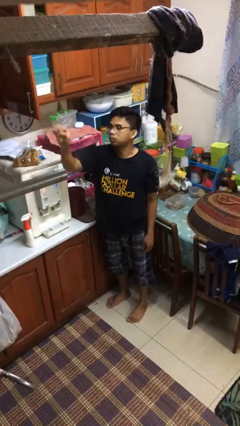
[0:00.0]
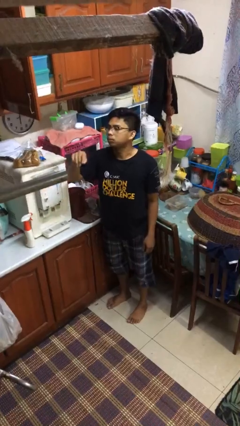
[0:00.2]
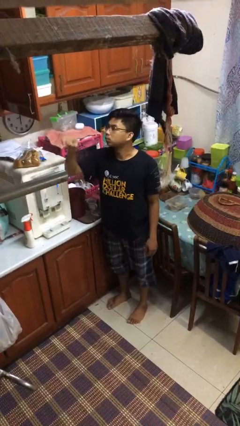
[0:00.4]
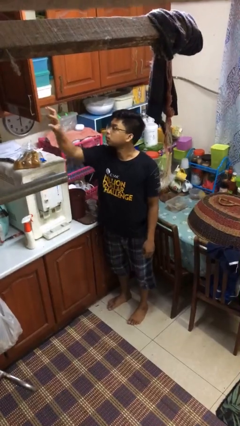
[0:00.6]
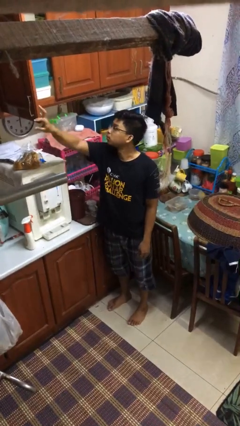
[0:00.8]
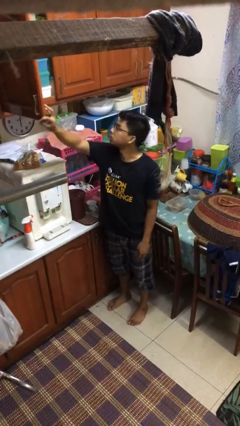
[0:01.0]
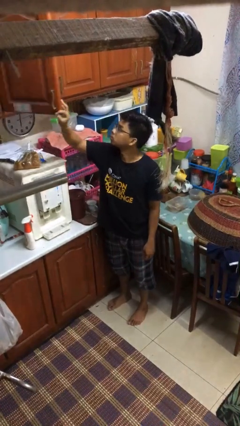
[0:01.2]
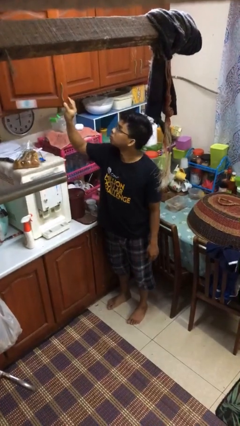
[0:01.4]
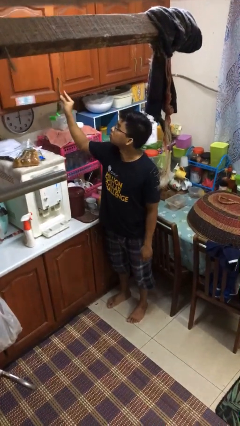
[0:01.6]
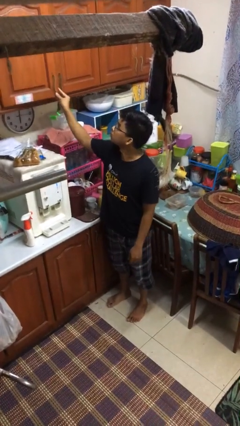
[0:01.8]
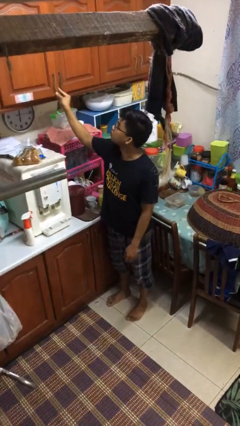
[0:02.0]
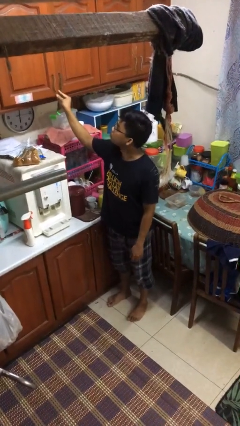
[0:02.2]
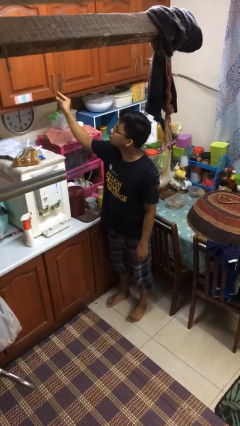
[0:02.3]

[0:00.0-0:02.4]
person closes kitchen drawer

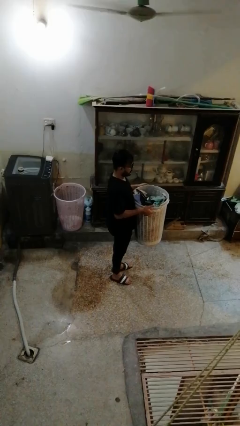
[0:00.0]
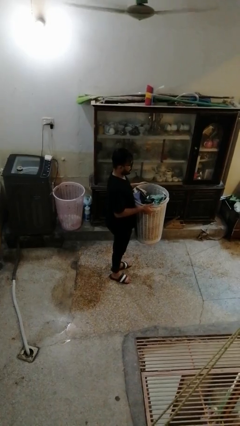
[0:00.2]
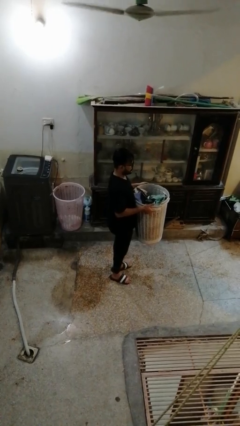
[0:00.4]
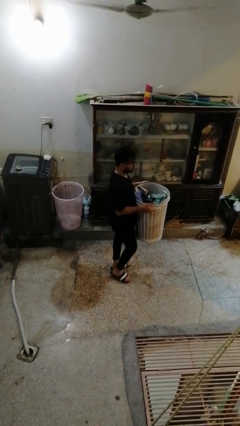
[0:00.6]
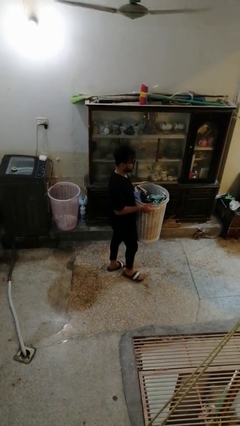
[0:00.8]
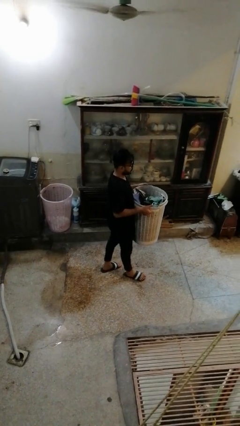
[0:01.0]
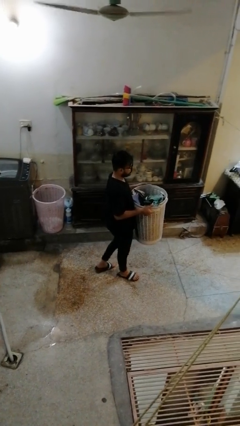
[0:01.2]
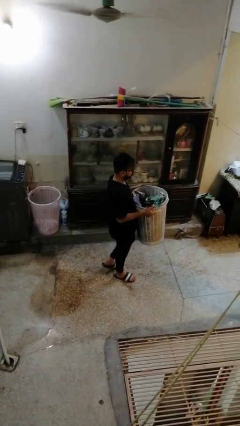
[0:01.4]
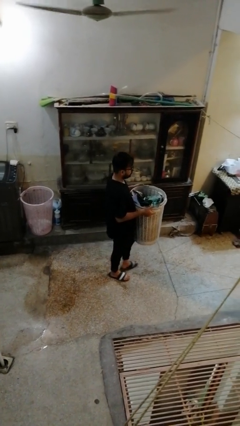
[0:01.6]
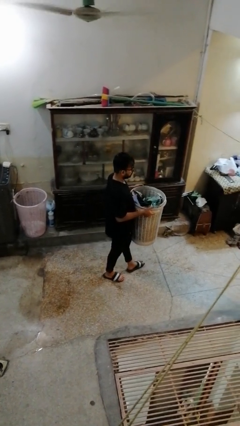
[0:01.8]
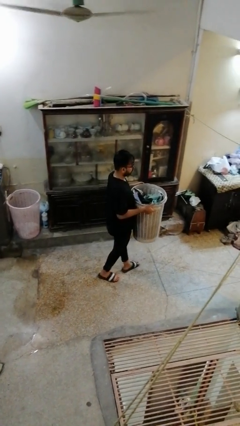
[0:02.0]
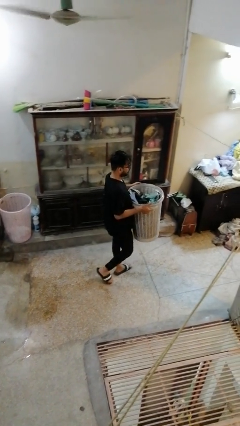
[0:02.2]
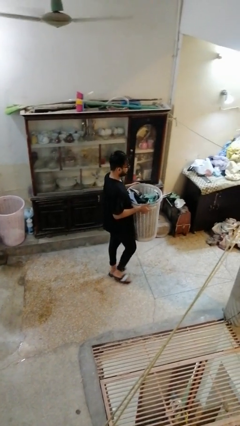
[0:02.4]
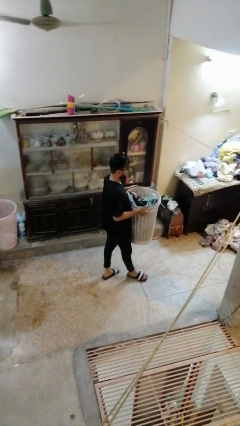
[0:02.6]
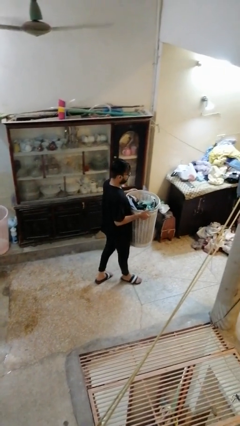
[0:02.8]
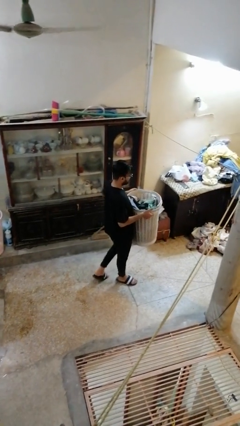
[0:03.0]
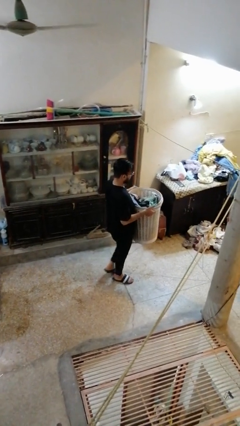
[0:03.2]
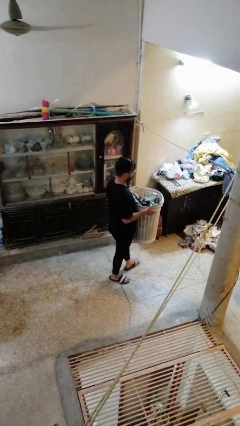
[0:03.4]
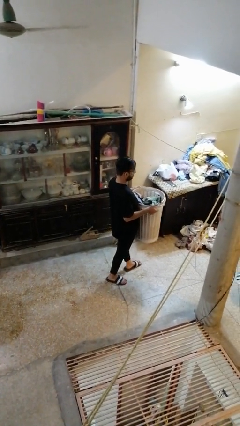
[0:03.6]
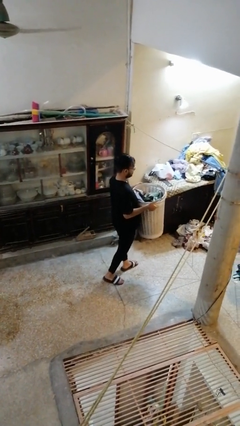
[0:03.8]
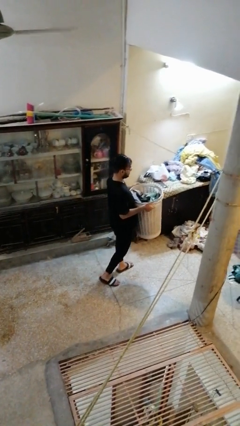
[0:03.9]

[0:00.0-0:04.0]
person carries laundry basket

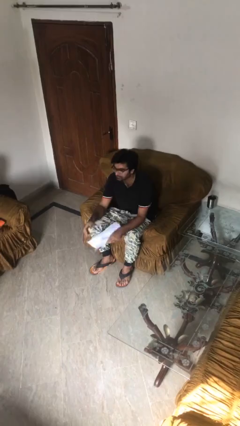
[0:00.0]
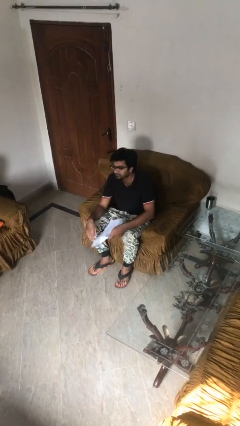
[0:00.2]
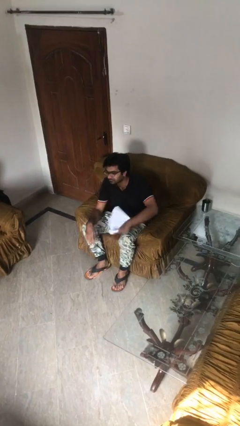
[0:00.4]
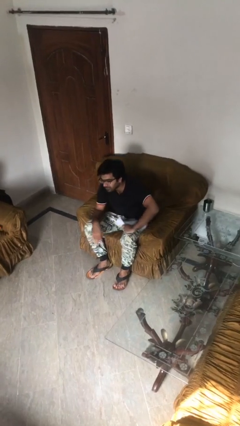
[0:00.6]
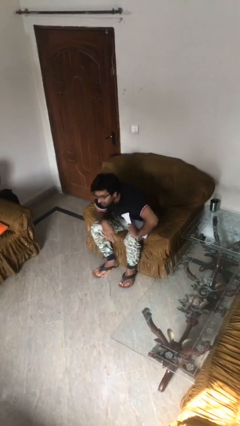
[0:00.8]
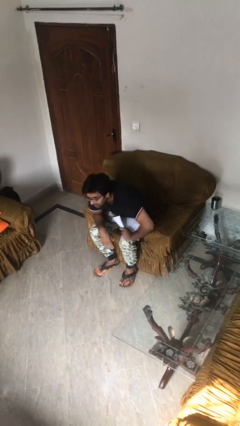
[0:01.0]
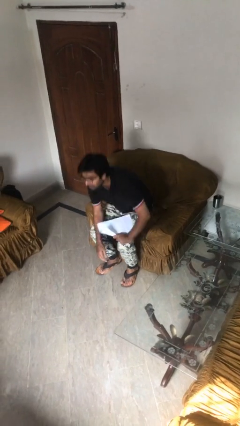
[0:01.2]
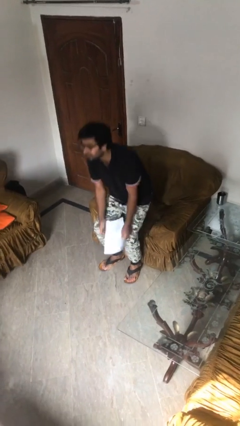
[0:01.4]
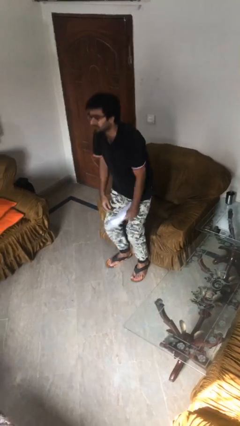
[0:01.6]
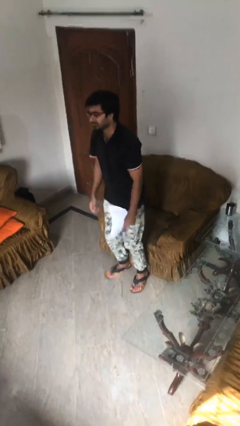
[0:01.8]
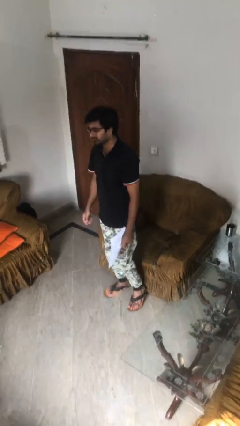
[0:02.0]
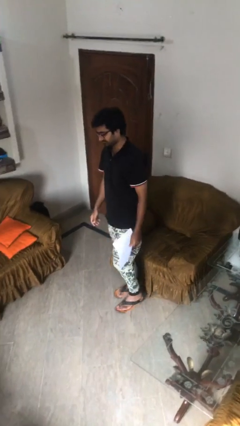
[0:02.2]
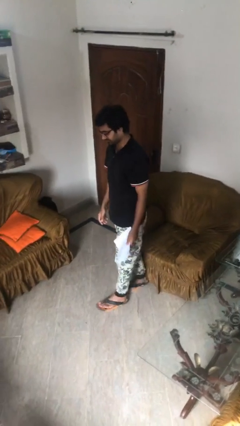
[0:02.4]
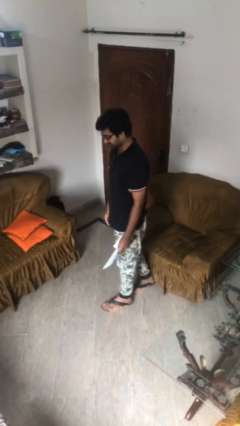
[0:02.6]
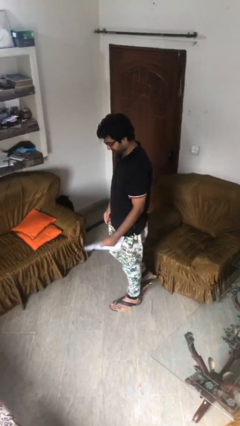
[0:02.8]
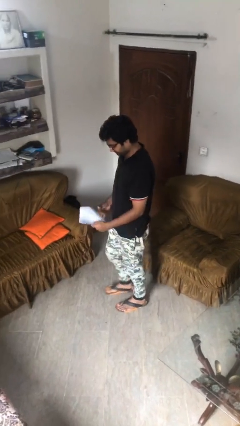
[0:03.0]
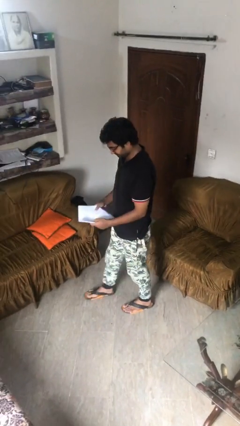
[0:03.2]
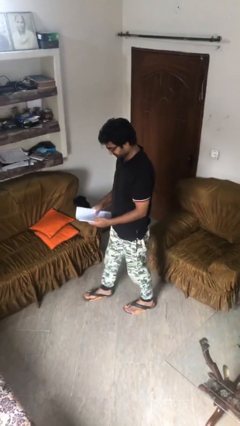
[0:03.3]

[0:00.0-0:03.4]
person stands up

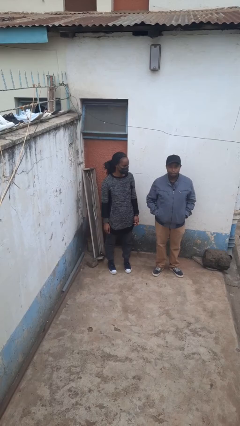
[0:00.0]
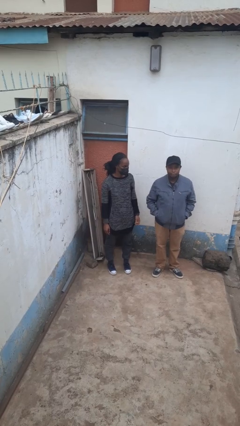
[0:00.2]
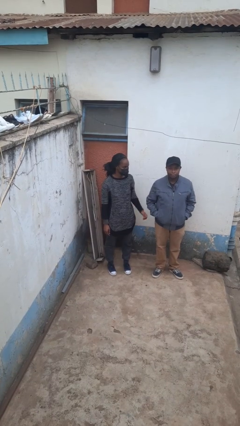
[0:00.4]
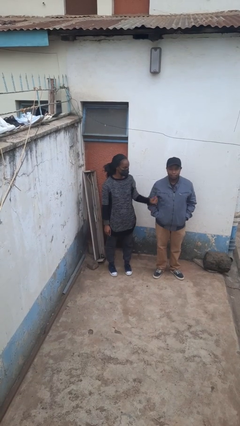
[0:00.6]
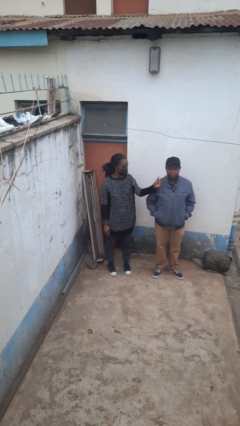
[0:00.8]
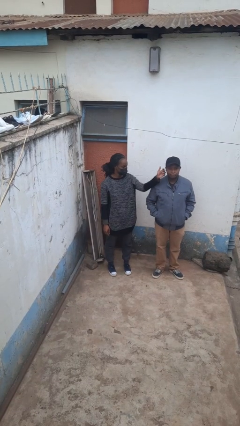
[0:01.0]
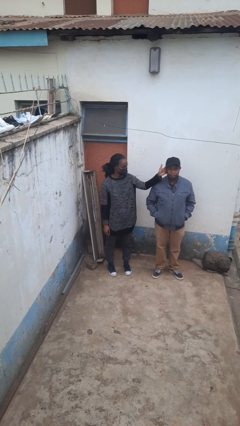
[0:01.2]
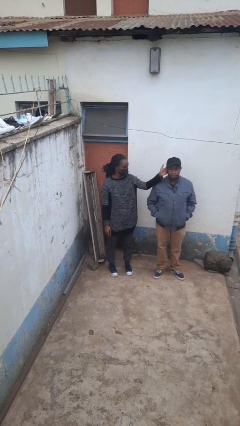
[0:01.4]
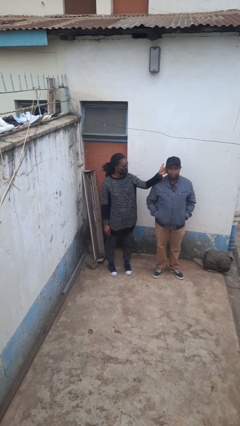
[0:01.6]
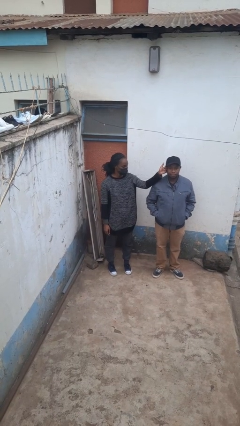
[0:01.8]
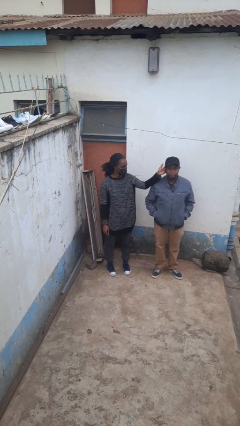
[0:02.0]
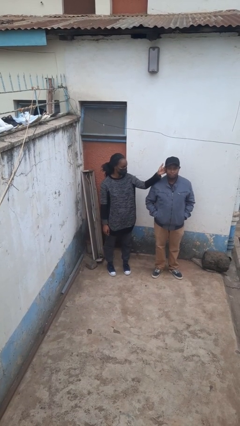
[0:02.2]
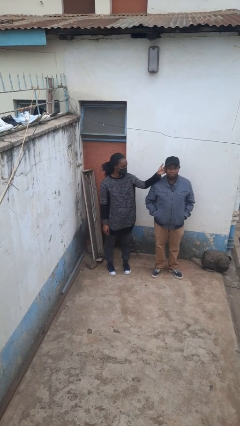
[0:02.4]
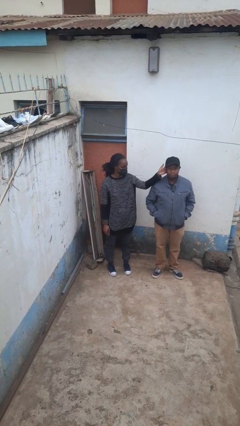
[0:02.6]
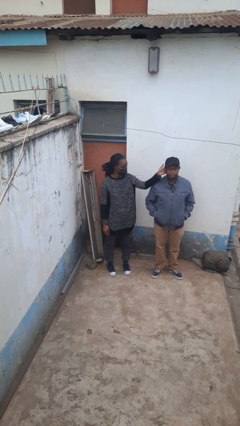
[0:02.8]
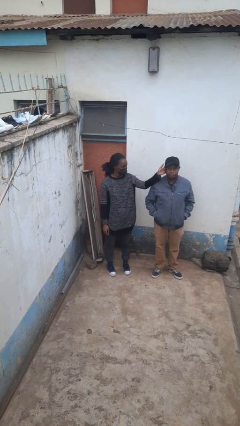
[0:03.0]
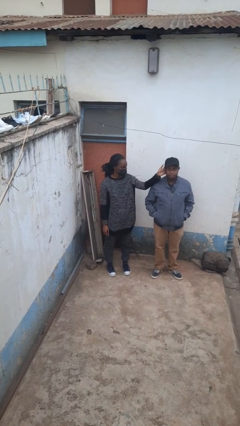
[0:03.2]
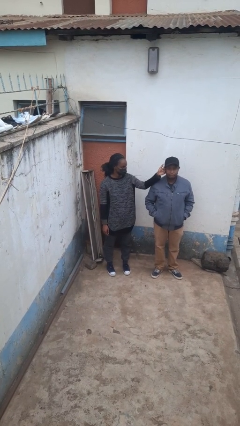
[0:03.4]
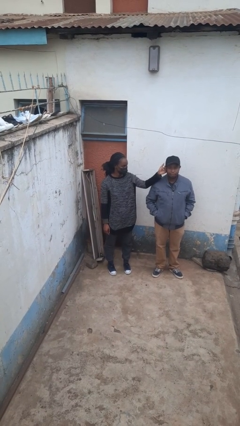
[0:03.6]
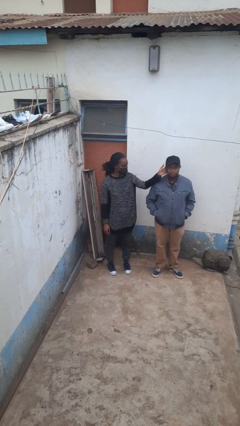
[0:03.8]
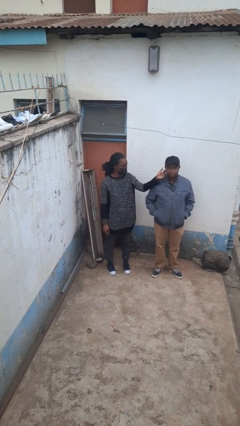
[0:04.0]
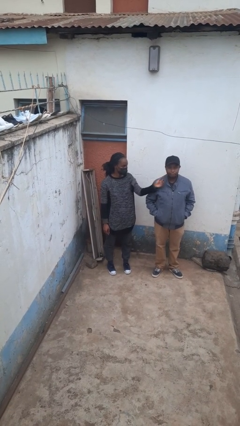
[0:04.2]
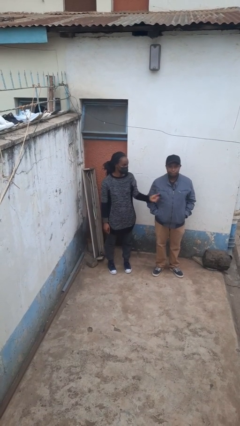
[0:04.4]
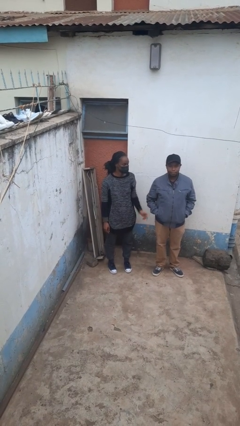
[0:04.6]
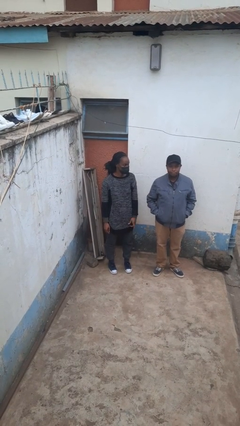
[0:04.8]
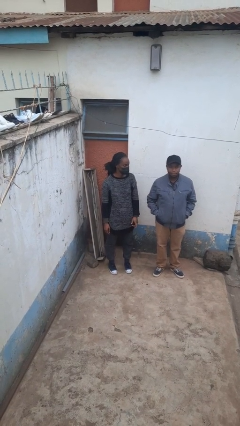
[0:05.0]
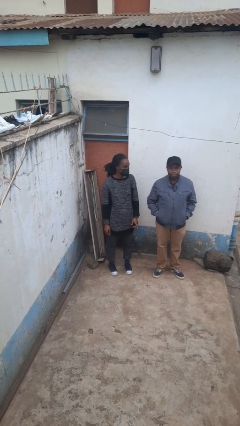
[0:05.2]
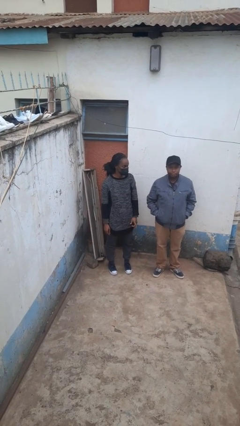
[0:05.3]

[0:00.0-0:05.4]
person touches face of person

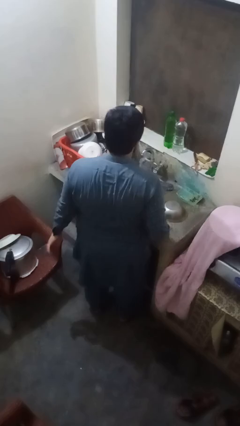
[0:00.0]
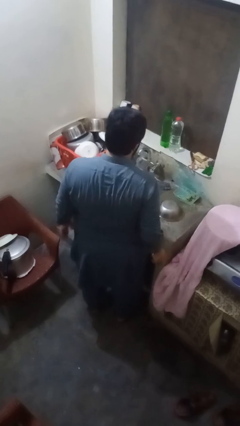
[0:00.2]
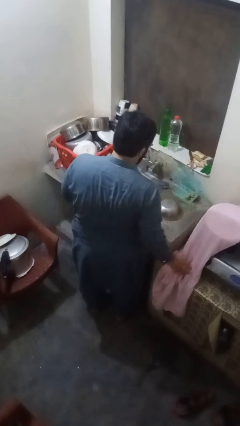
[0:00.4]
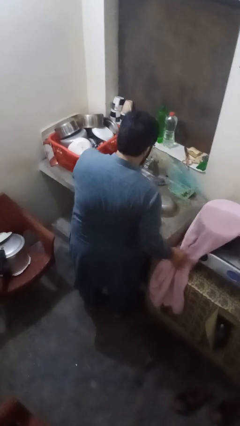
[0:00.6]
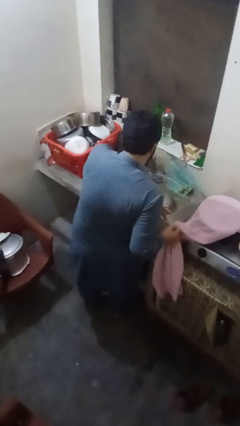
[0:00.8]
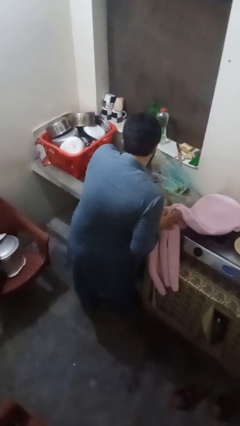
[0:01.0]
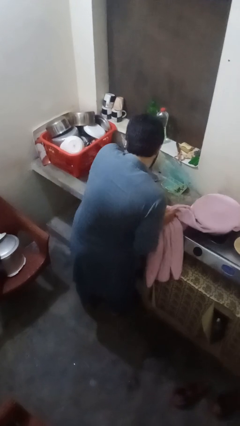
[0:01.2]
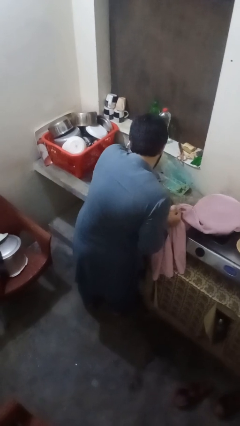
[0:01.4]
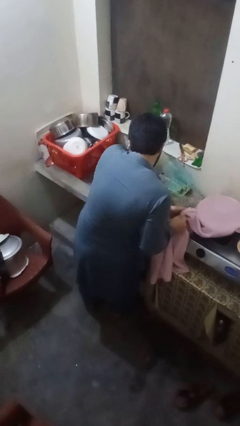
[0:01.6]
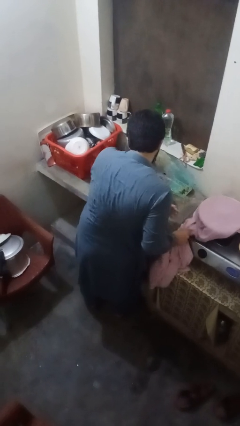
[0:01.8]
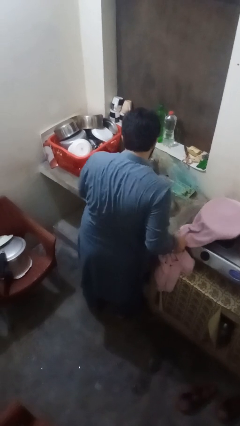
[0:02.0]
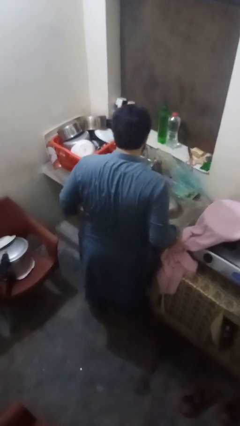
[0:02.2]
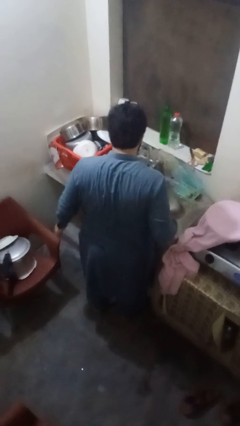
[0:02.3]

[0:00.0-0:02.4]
person dries hands with towel
